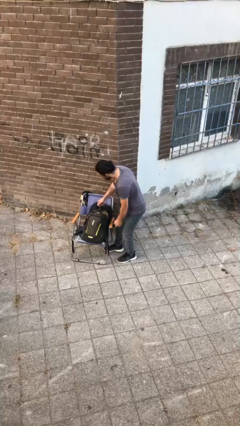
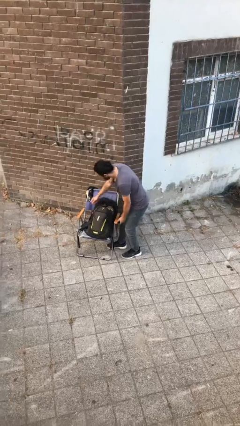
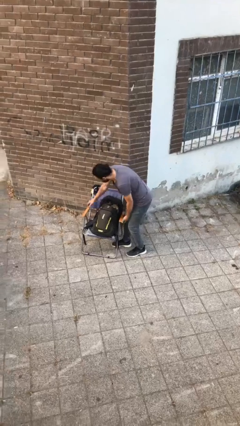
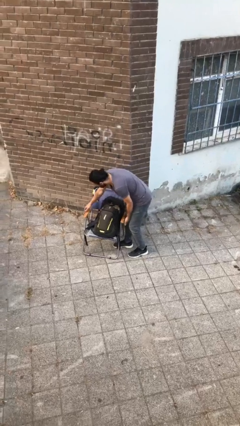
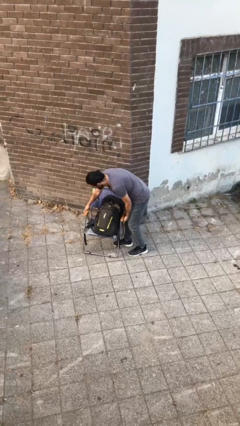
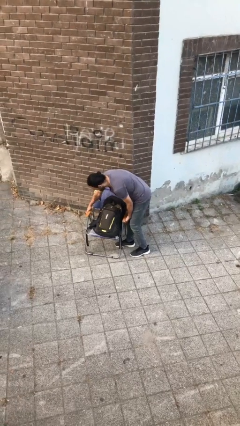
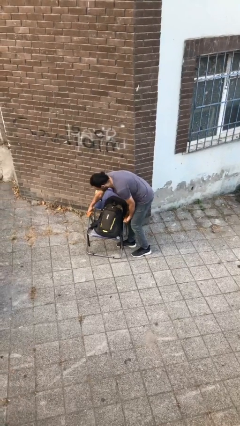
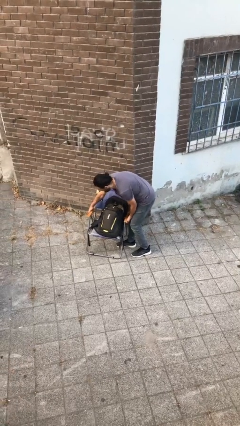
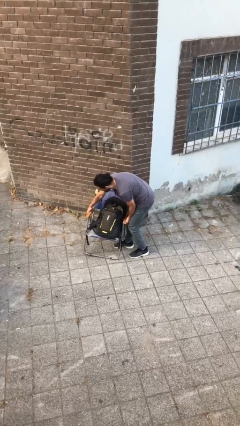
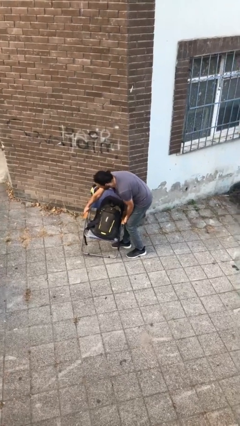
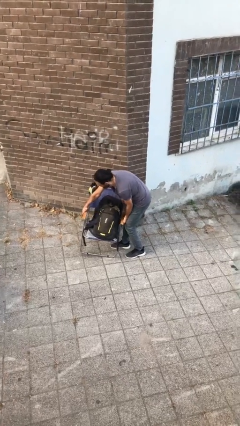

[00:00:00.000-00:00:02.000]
person picks up object from floor

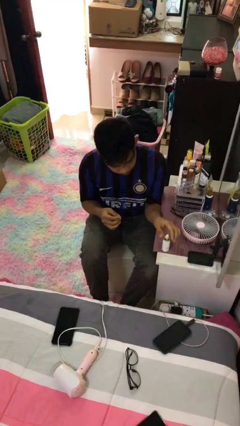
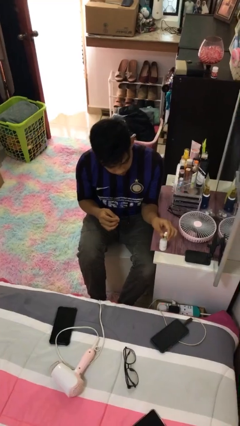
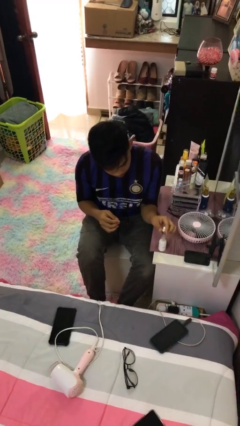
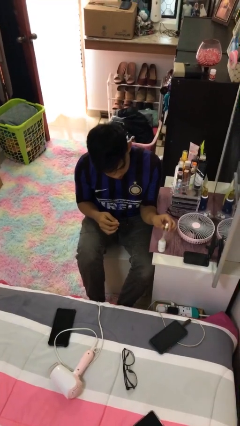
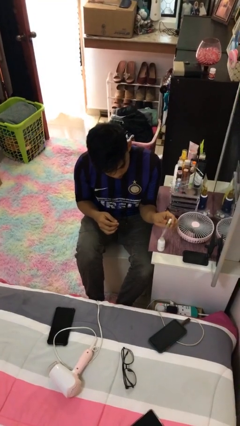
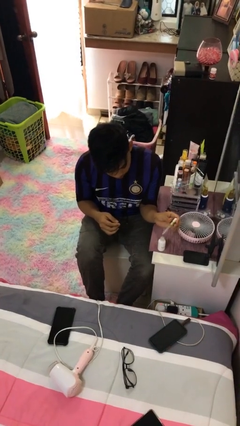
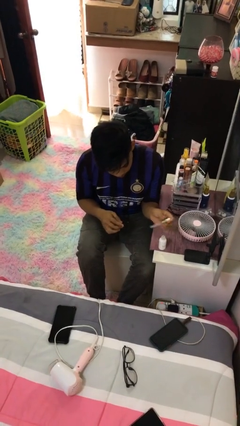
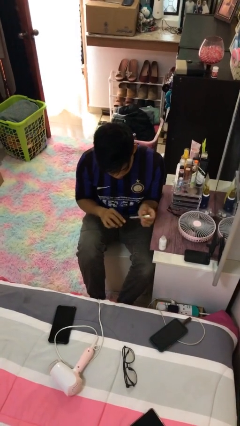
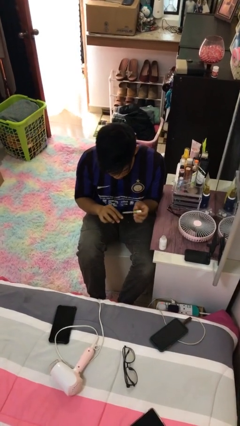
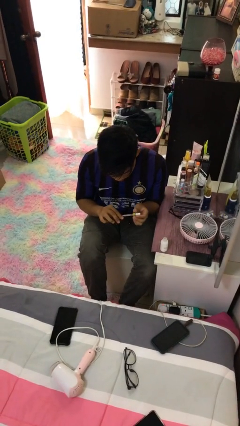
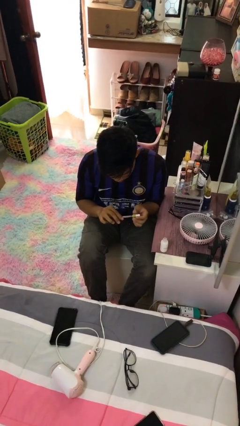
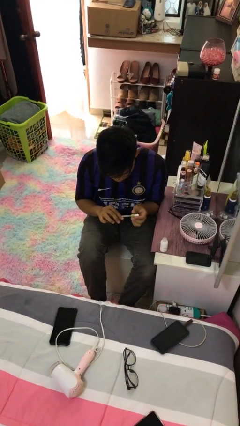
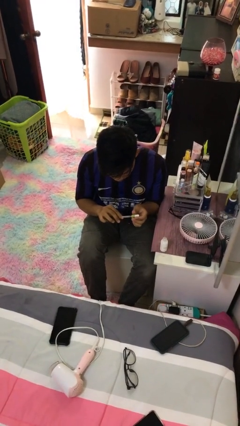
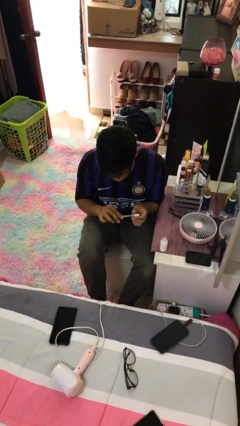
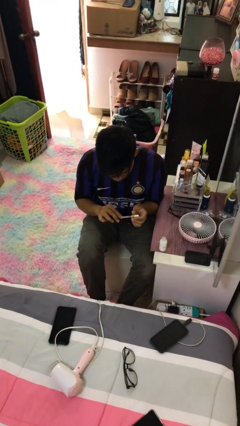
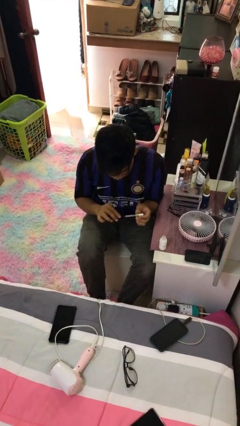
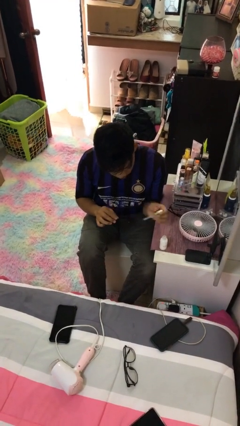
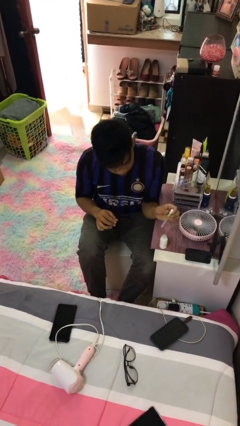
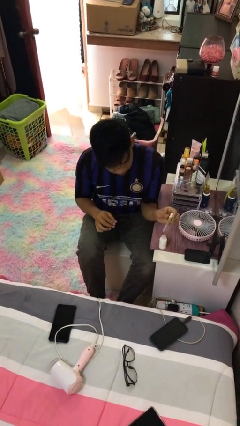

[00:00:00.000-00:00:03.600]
person paints fingernails

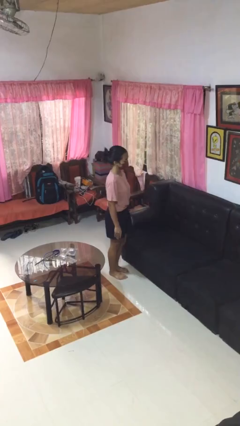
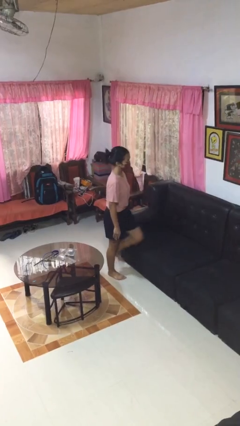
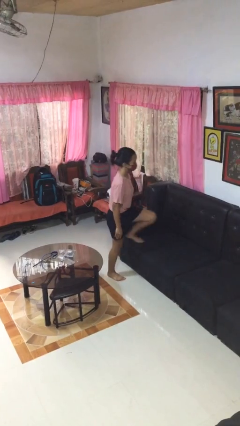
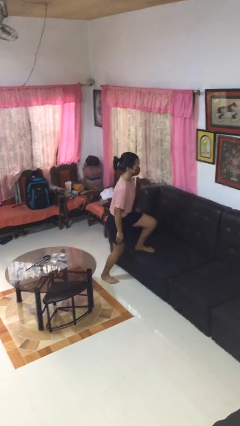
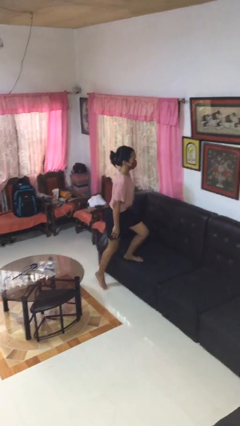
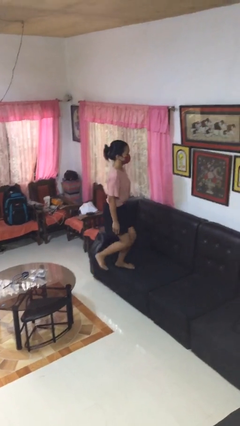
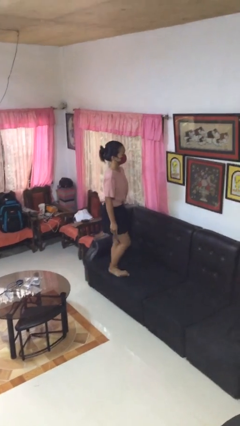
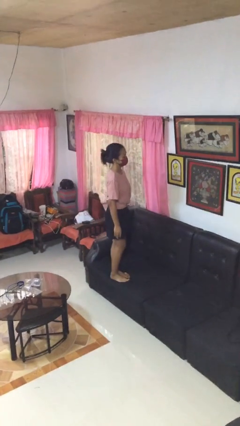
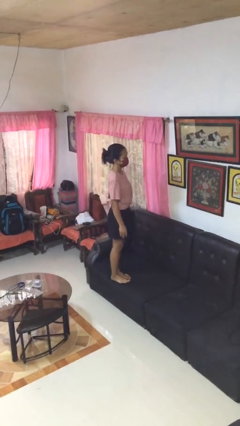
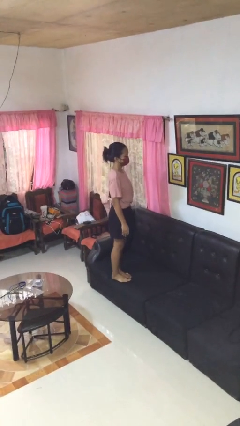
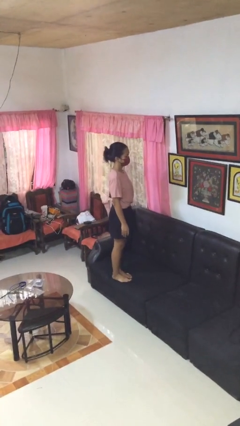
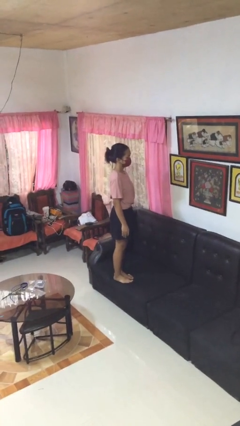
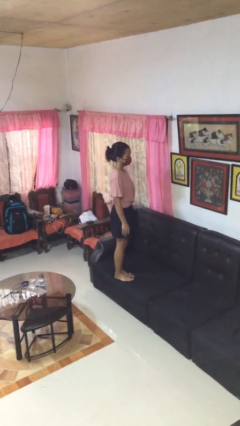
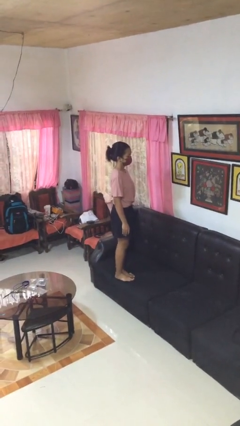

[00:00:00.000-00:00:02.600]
person climbs on couch

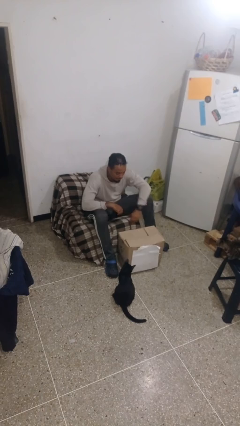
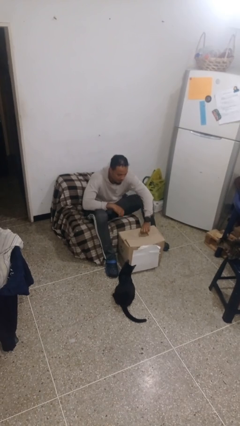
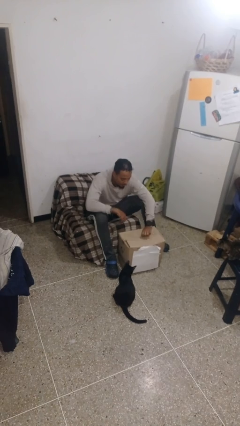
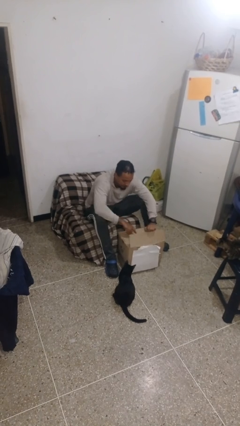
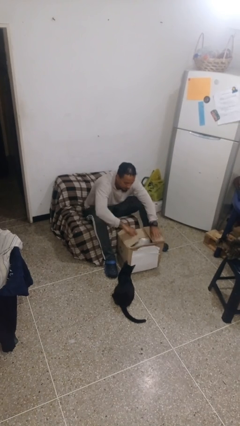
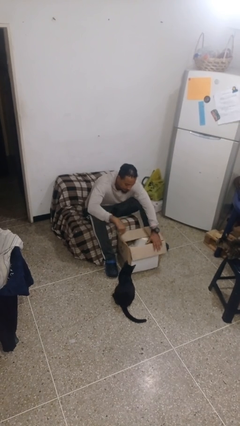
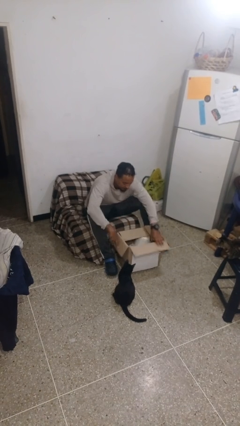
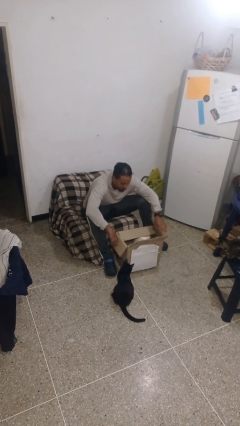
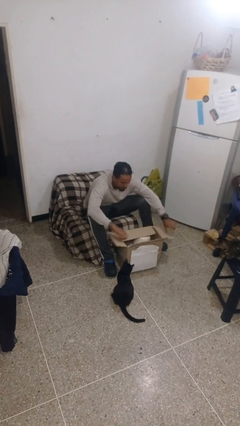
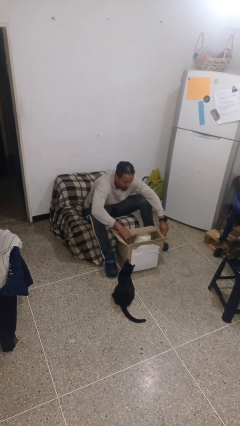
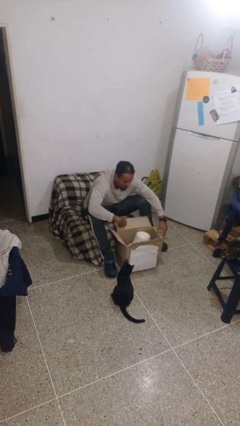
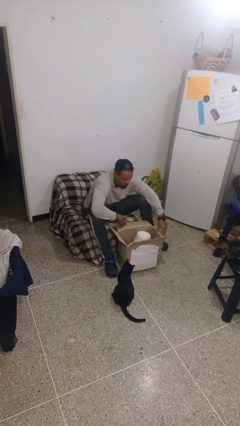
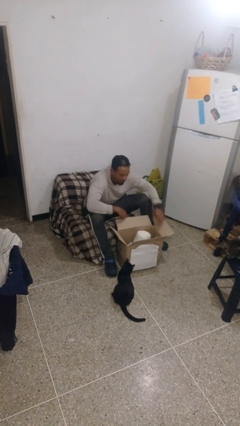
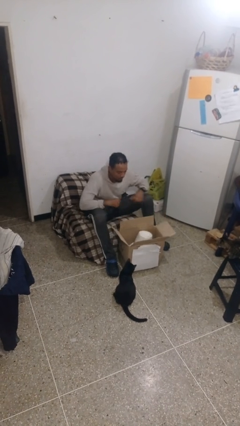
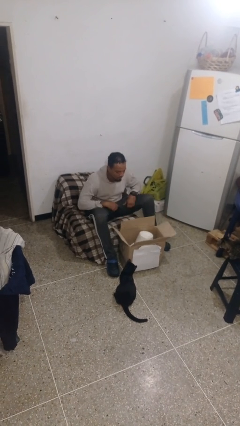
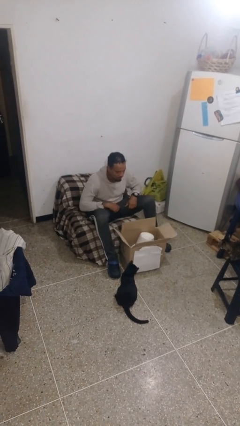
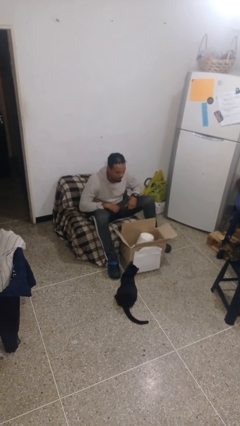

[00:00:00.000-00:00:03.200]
person opens box

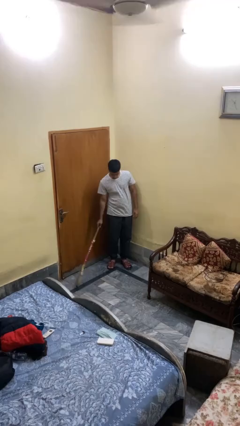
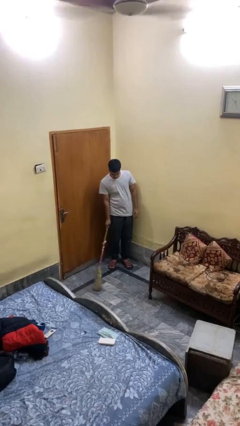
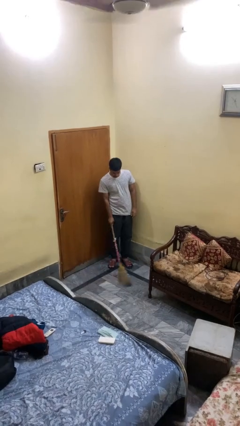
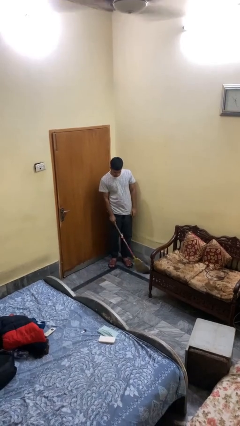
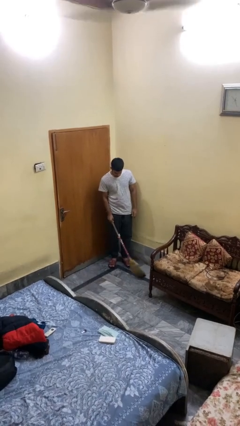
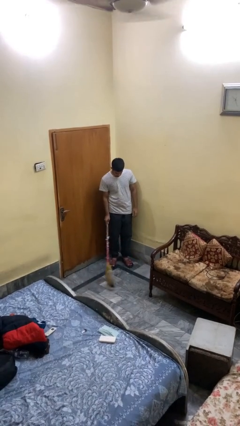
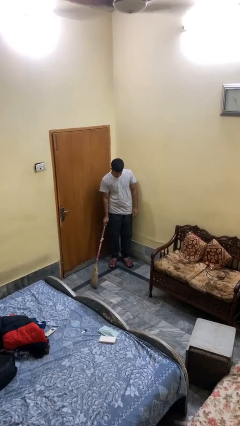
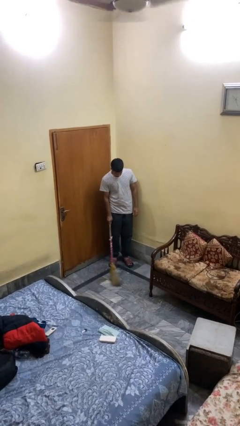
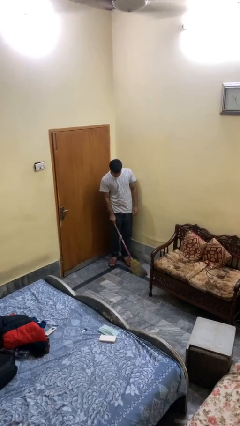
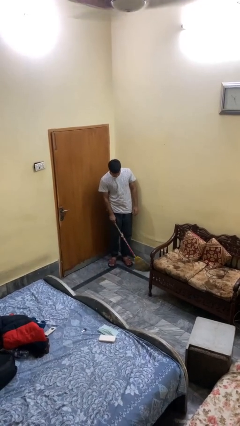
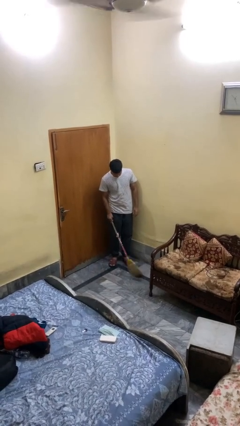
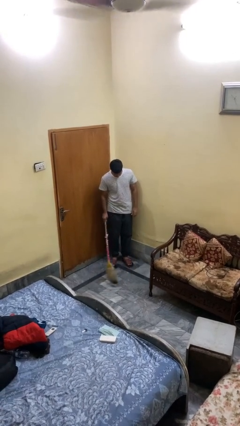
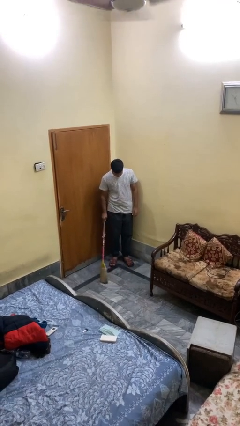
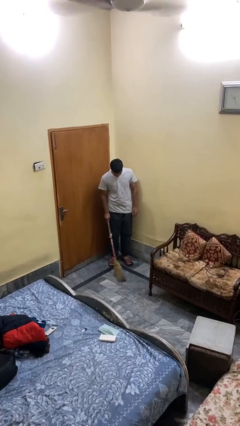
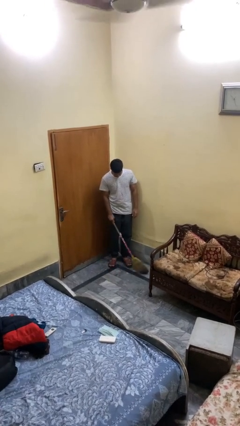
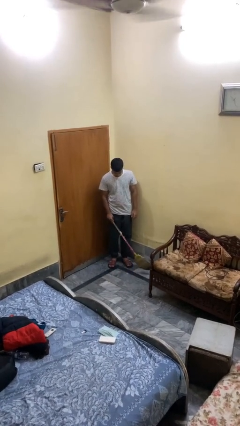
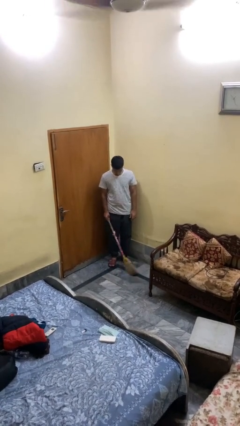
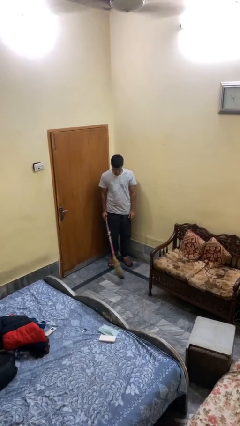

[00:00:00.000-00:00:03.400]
person sweeps floor

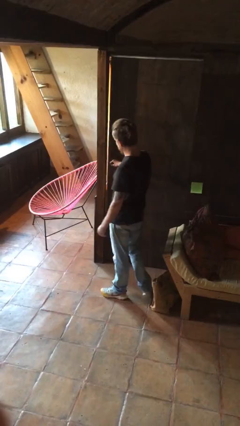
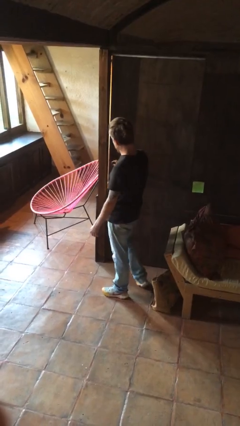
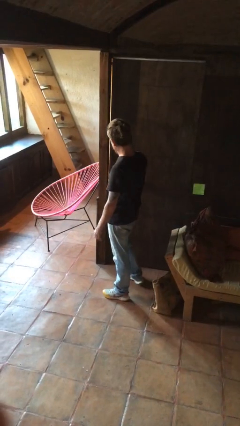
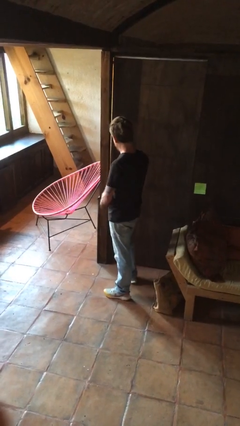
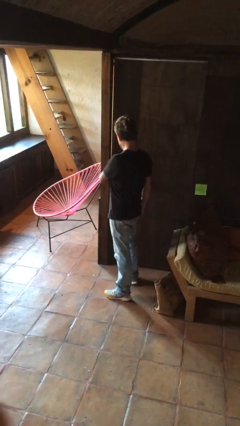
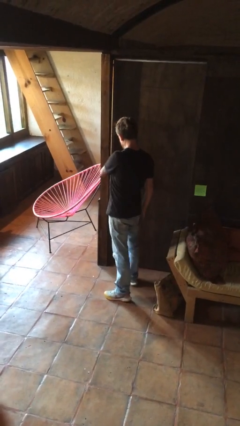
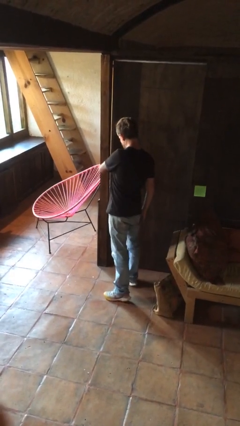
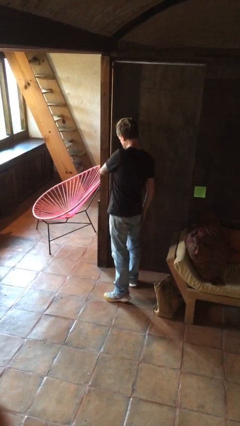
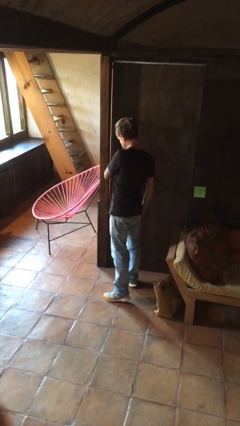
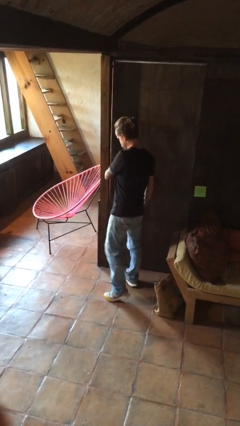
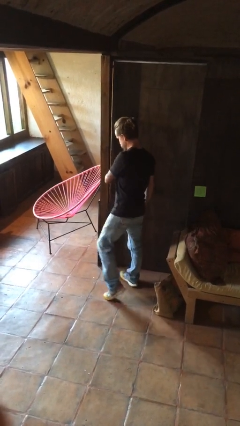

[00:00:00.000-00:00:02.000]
person locks door with keys

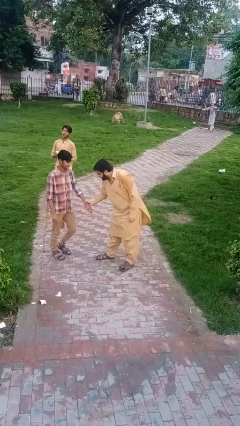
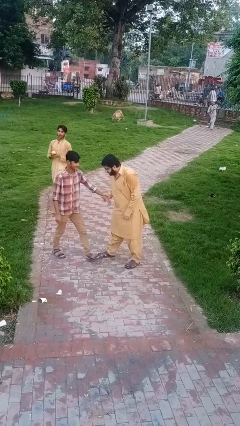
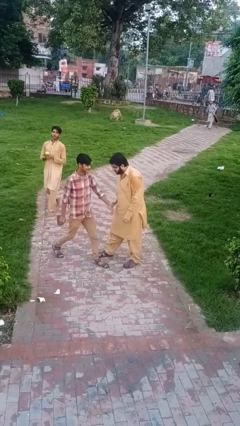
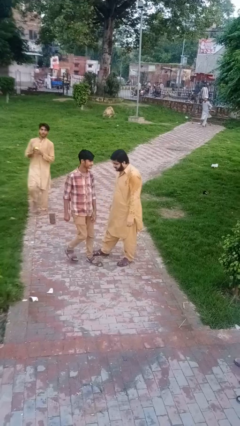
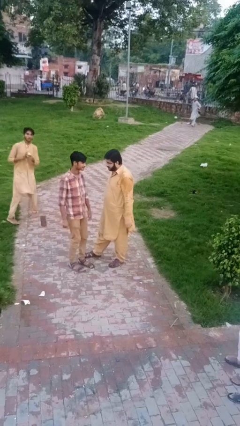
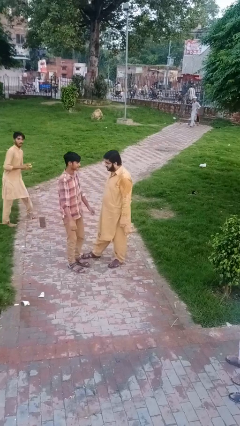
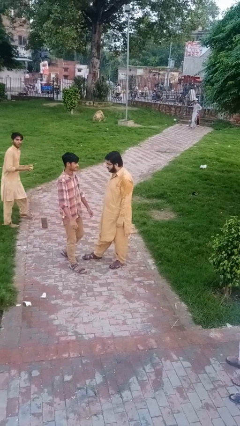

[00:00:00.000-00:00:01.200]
person grabs person by forearm
